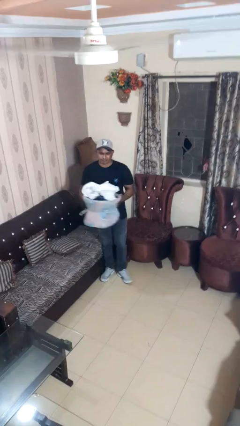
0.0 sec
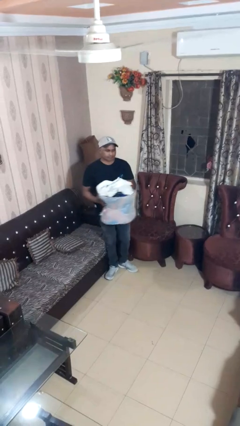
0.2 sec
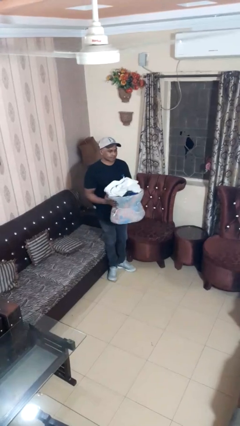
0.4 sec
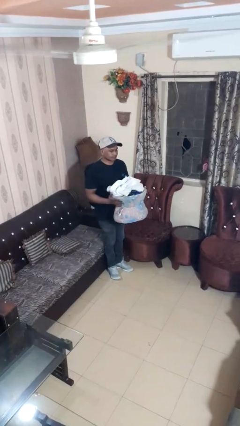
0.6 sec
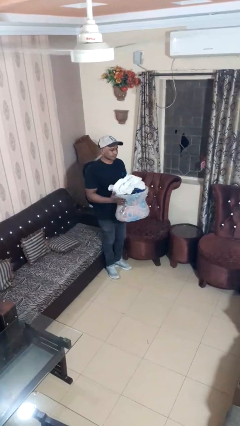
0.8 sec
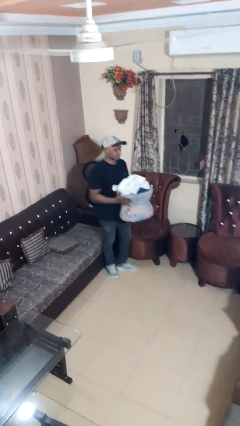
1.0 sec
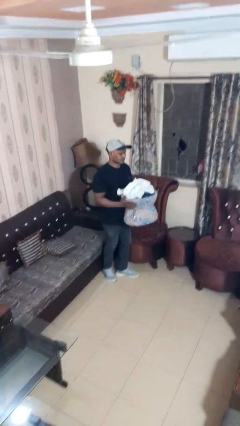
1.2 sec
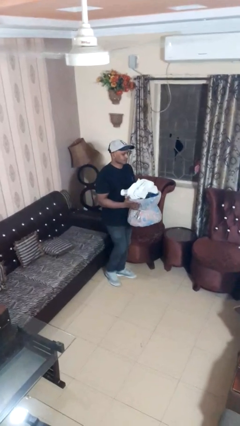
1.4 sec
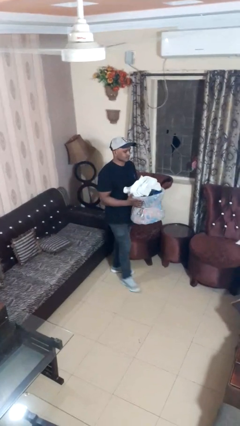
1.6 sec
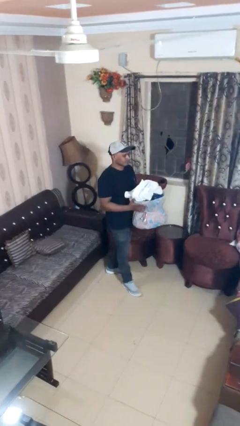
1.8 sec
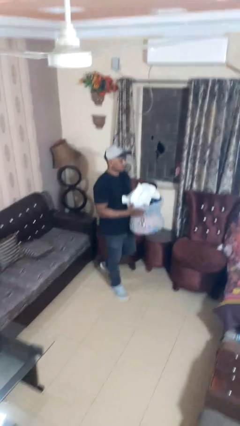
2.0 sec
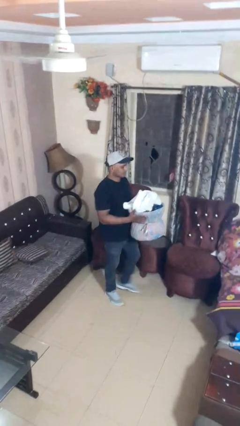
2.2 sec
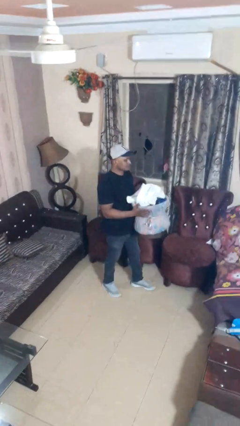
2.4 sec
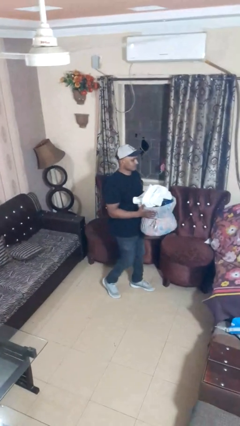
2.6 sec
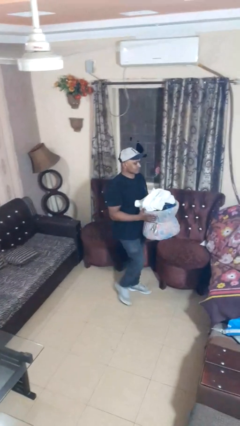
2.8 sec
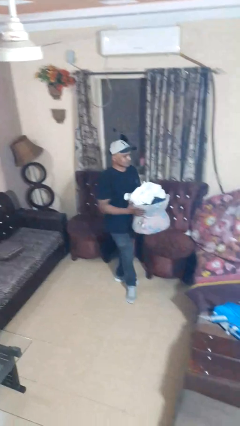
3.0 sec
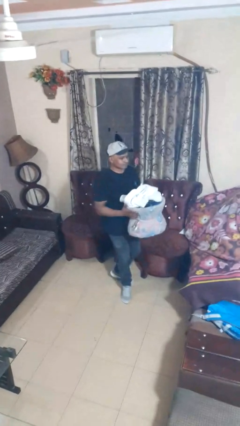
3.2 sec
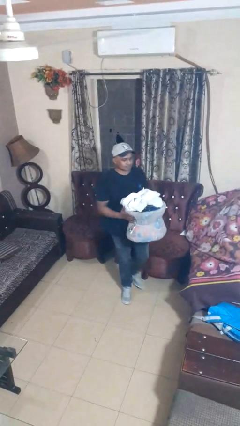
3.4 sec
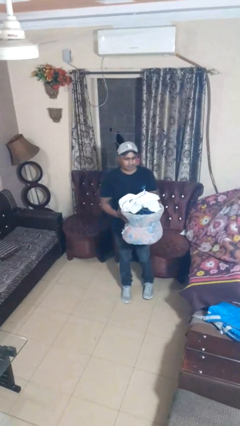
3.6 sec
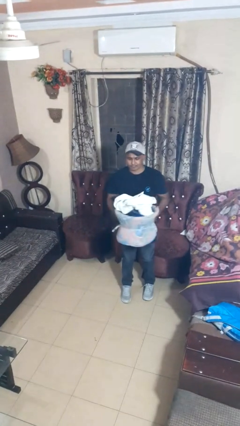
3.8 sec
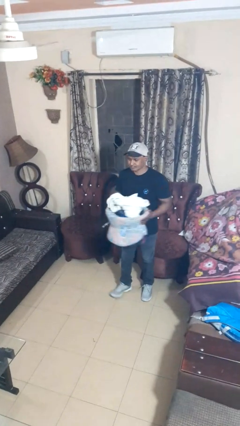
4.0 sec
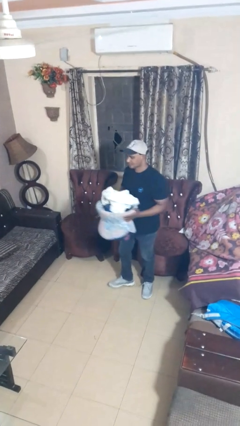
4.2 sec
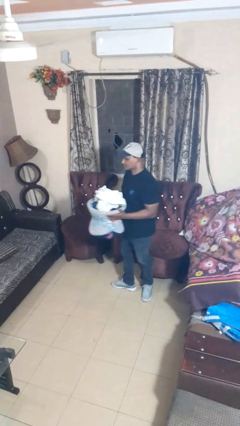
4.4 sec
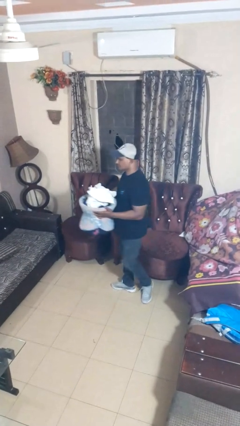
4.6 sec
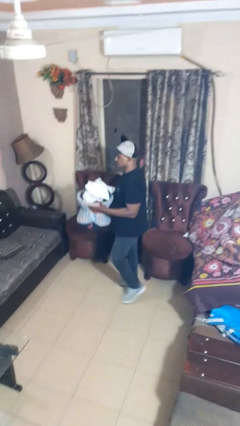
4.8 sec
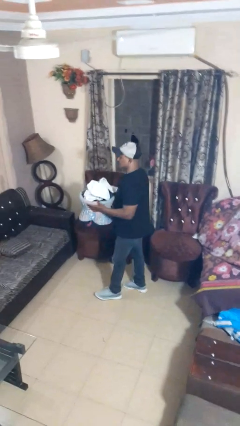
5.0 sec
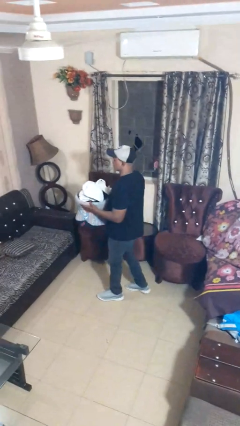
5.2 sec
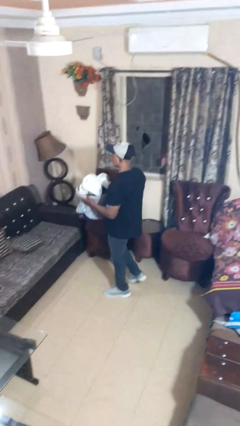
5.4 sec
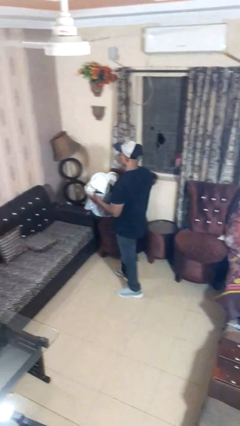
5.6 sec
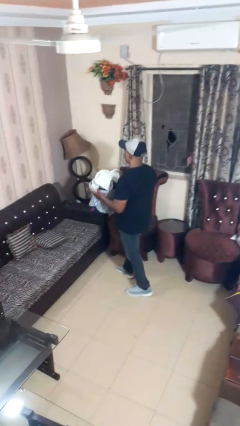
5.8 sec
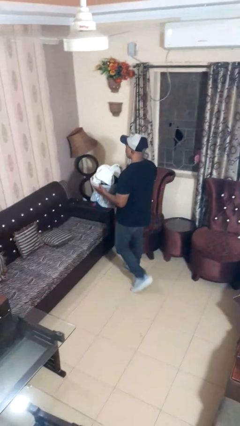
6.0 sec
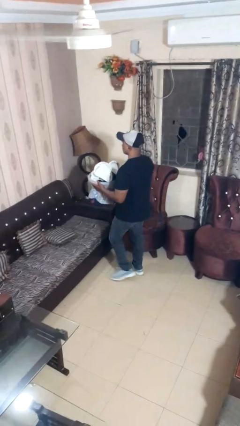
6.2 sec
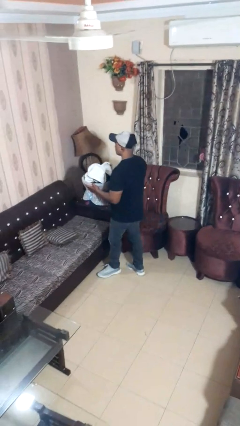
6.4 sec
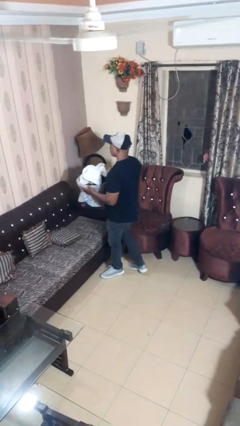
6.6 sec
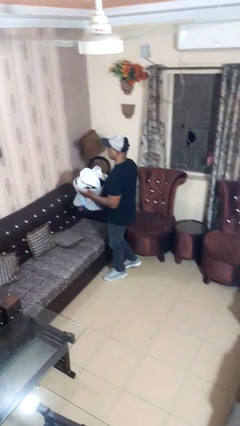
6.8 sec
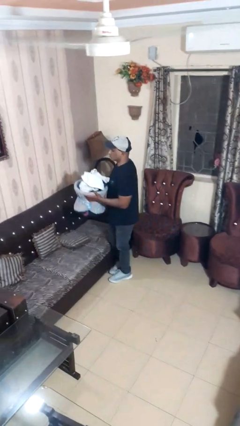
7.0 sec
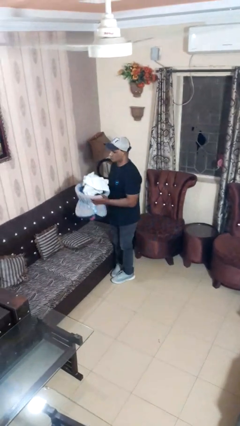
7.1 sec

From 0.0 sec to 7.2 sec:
person carries laundry basket

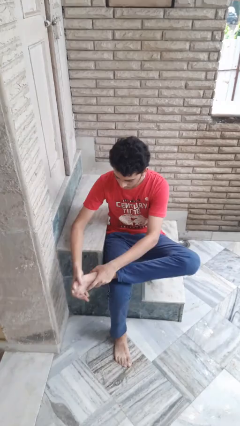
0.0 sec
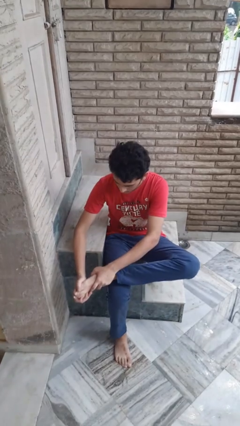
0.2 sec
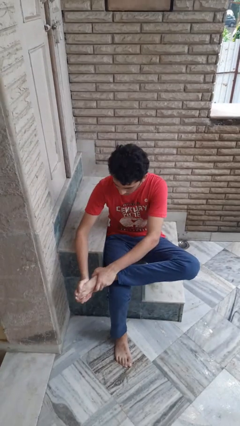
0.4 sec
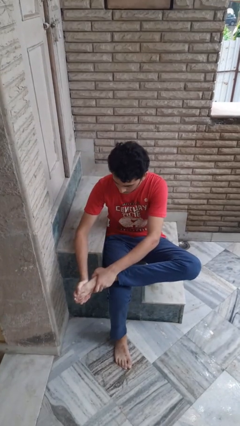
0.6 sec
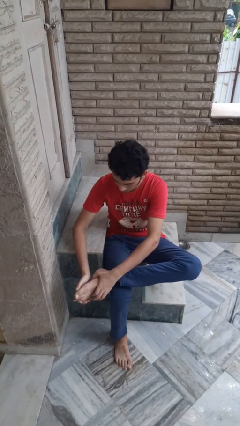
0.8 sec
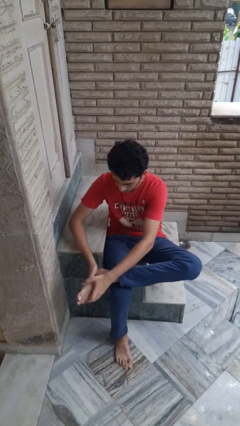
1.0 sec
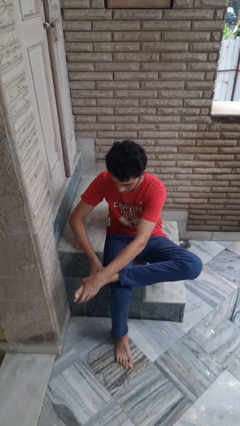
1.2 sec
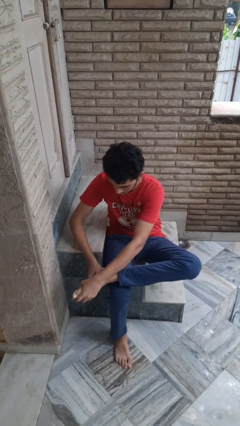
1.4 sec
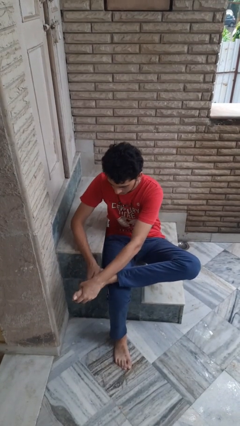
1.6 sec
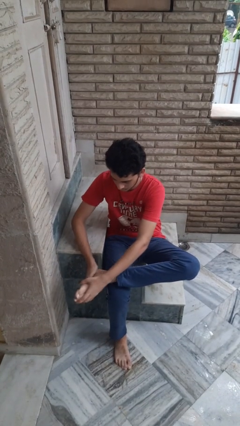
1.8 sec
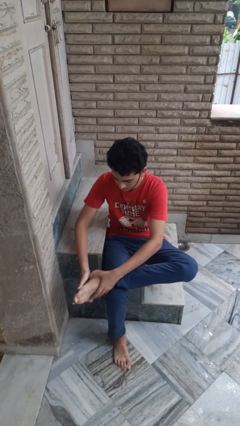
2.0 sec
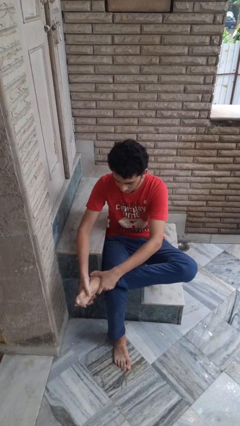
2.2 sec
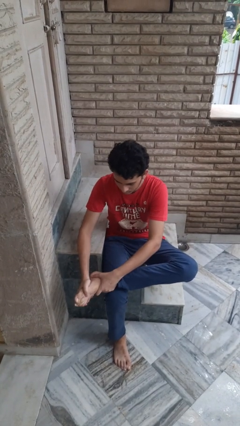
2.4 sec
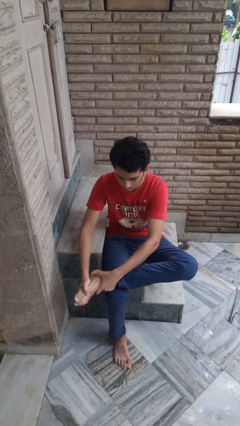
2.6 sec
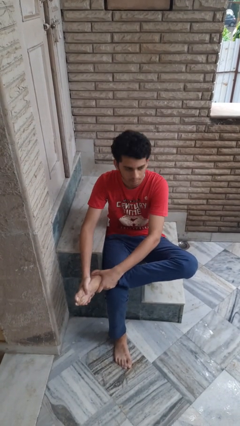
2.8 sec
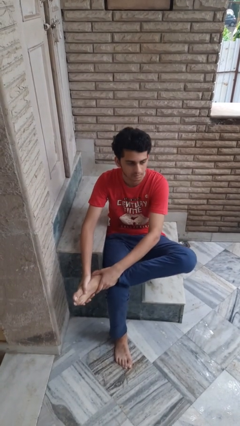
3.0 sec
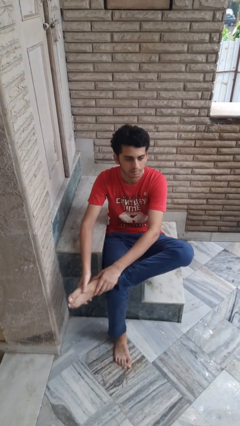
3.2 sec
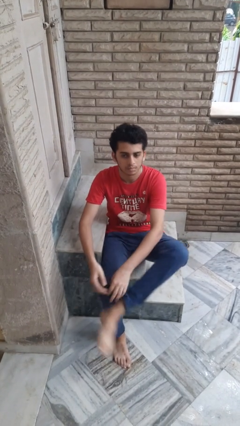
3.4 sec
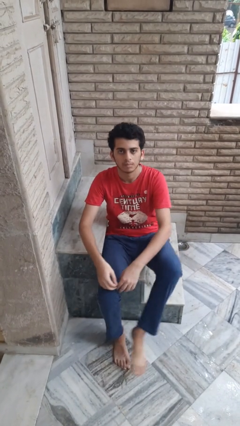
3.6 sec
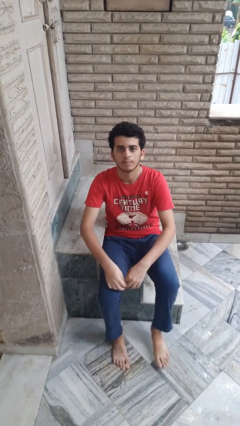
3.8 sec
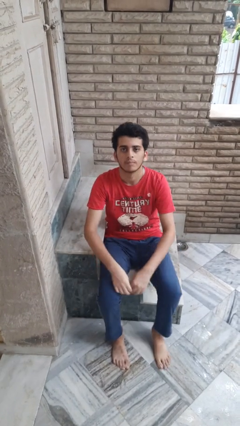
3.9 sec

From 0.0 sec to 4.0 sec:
person rubs foot

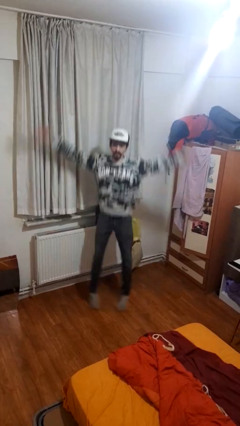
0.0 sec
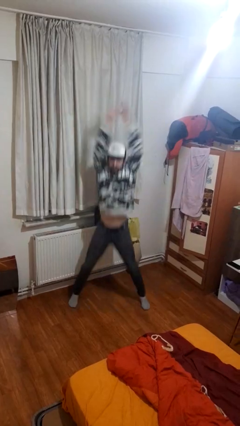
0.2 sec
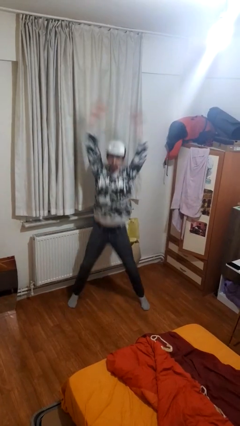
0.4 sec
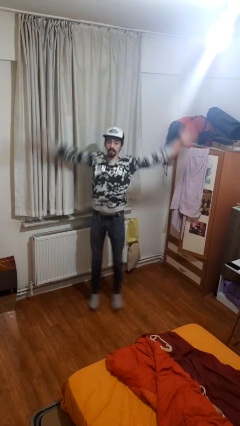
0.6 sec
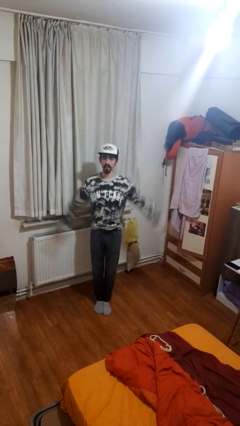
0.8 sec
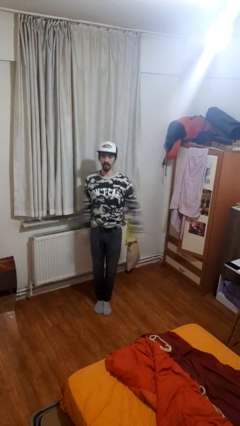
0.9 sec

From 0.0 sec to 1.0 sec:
person exercises with jumping jacks

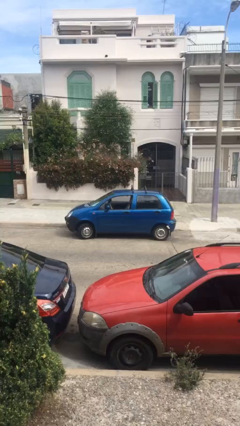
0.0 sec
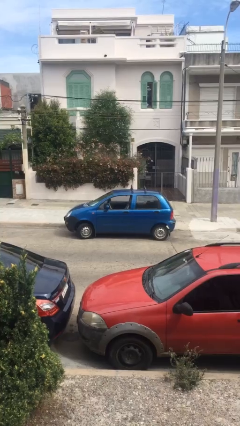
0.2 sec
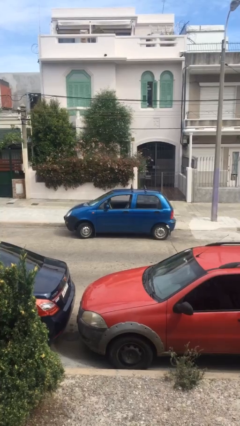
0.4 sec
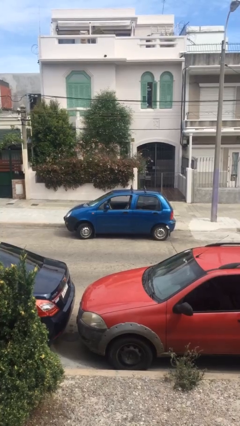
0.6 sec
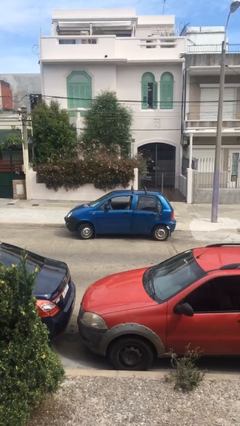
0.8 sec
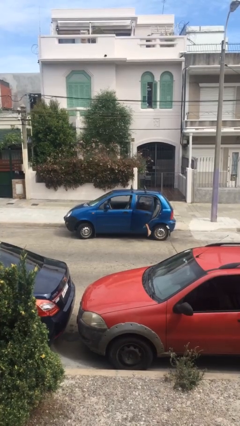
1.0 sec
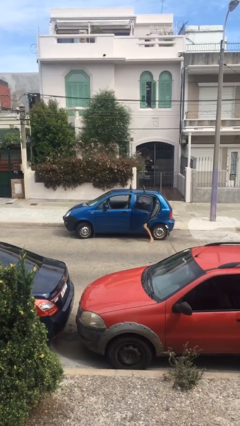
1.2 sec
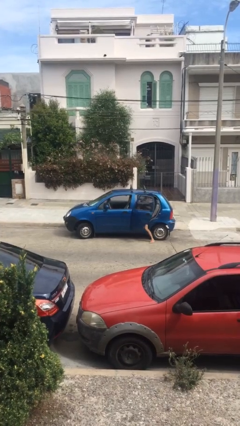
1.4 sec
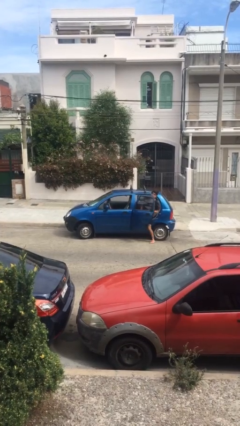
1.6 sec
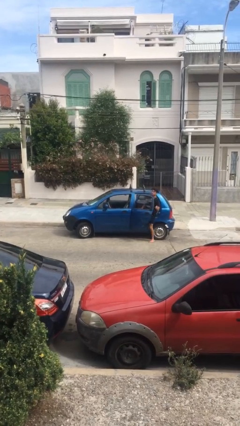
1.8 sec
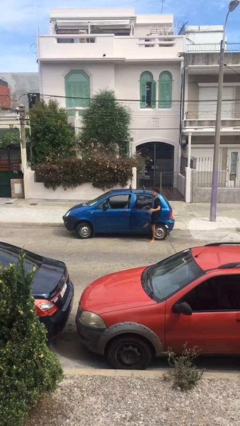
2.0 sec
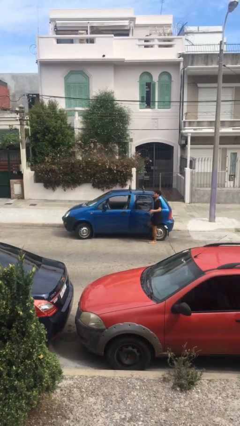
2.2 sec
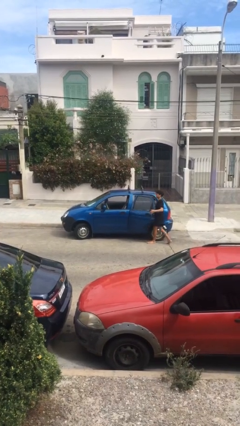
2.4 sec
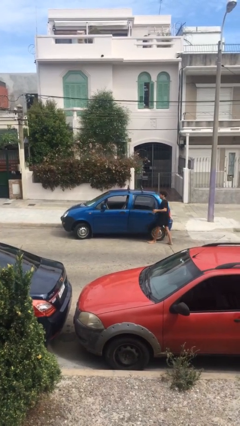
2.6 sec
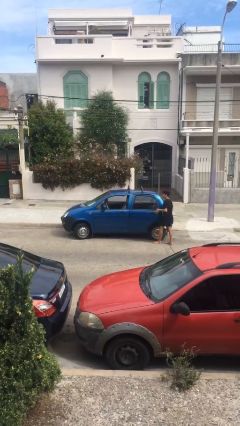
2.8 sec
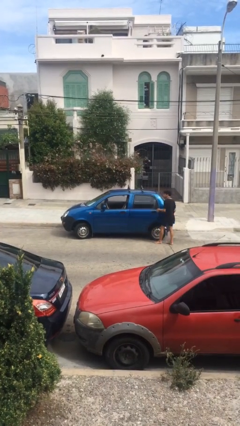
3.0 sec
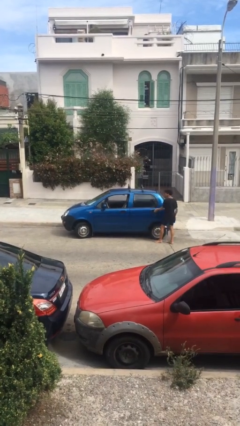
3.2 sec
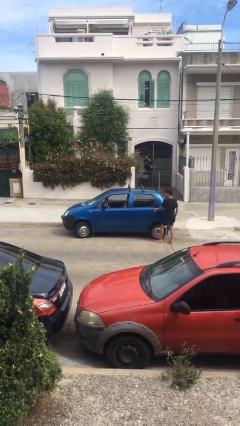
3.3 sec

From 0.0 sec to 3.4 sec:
car drops off person

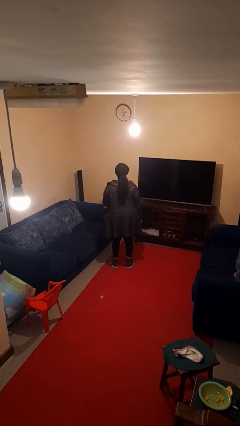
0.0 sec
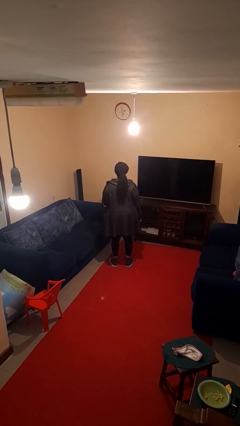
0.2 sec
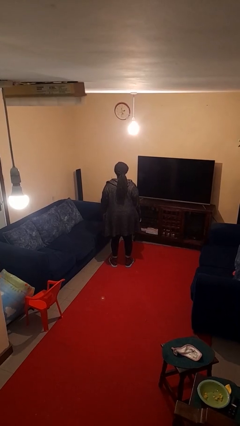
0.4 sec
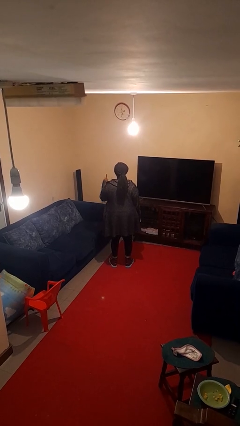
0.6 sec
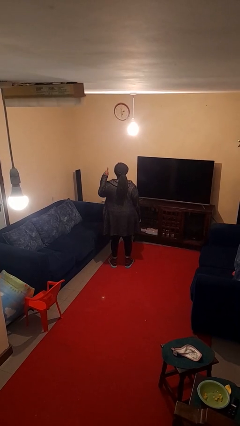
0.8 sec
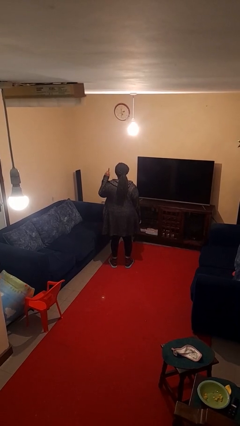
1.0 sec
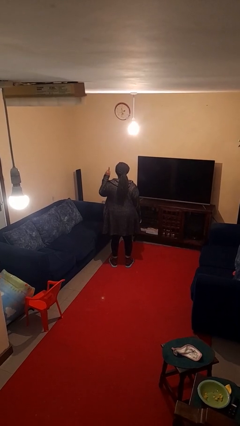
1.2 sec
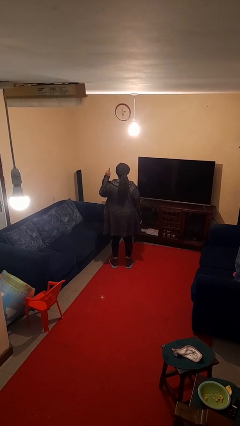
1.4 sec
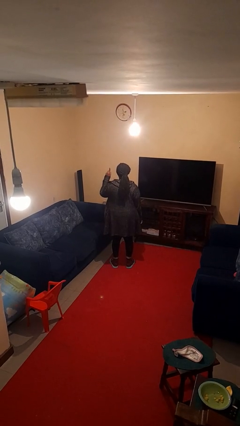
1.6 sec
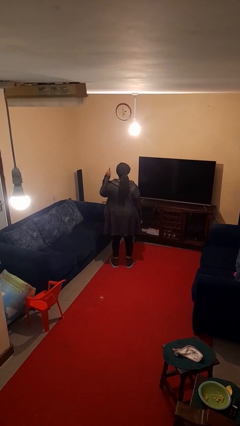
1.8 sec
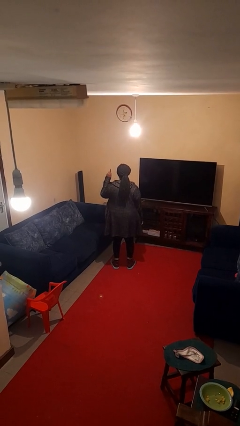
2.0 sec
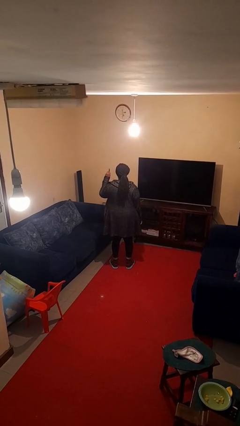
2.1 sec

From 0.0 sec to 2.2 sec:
person gestures number one
